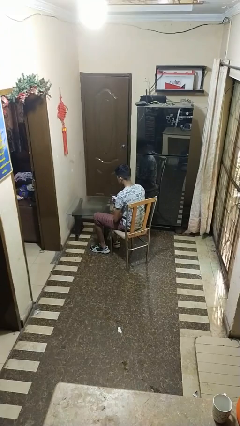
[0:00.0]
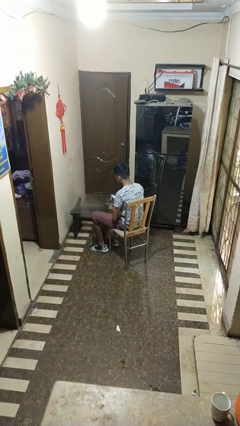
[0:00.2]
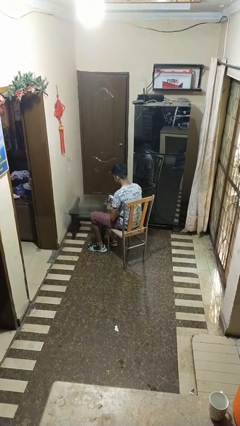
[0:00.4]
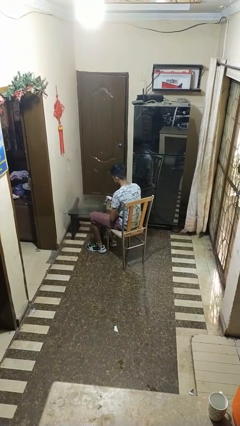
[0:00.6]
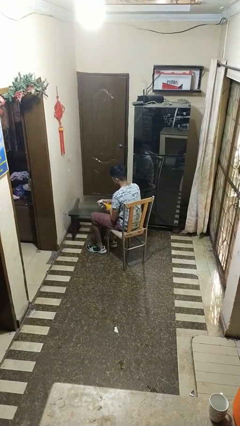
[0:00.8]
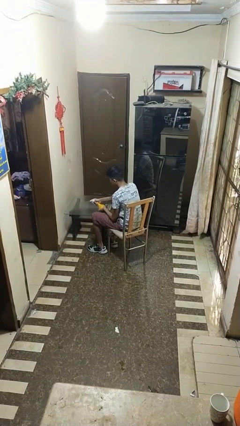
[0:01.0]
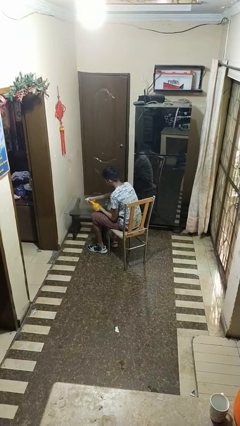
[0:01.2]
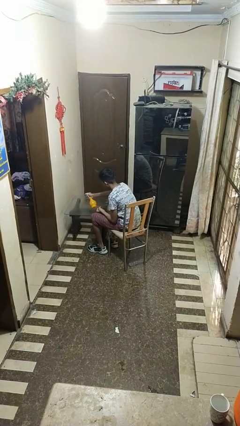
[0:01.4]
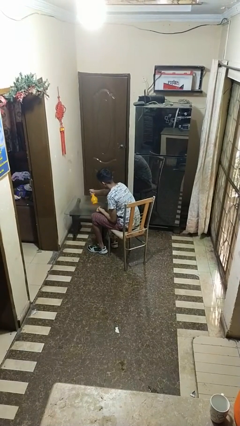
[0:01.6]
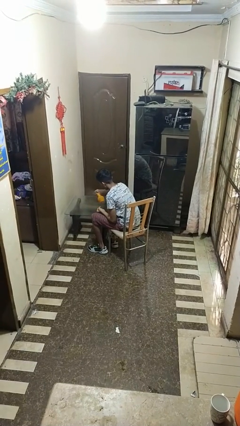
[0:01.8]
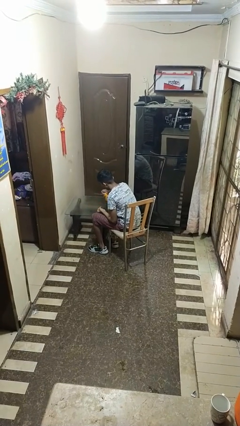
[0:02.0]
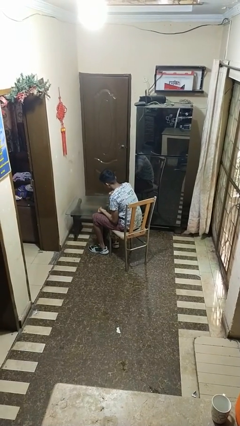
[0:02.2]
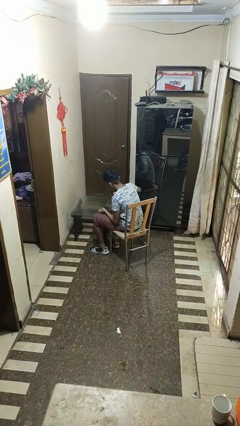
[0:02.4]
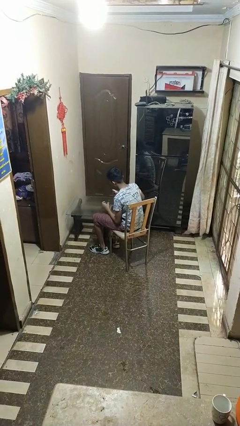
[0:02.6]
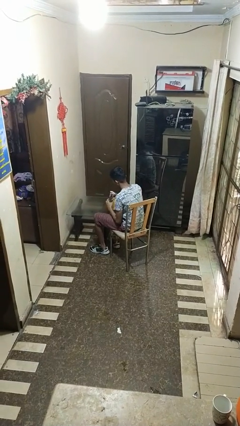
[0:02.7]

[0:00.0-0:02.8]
person sprays from bottle

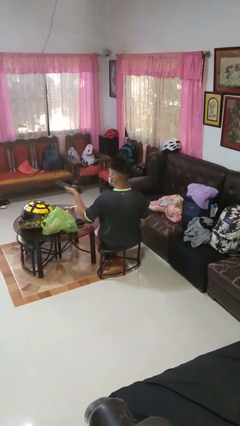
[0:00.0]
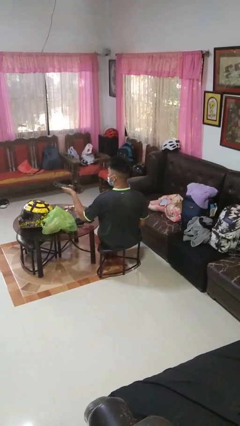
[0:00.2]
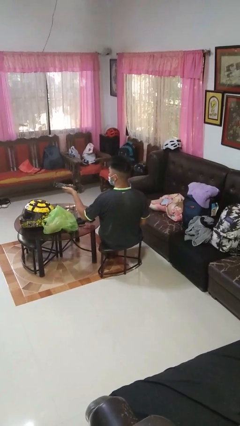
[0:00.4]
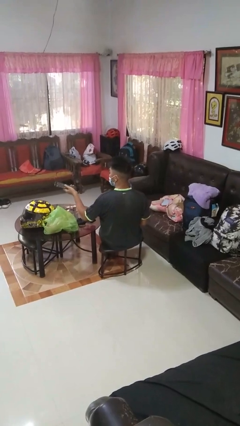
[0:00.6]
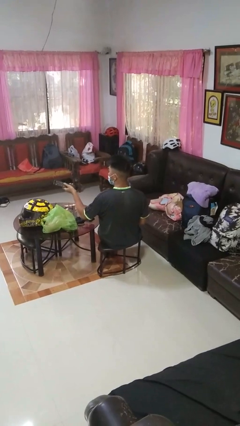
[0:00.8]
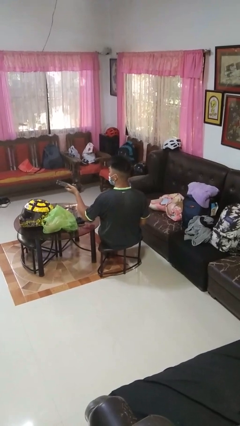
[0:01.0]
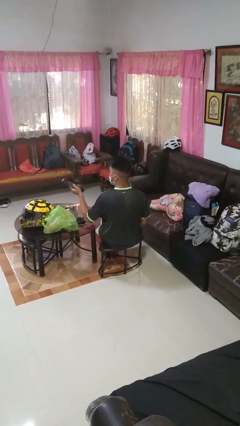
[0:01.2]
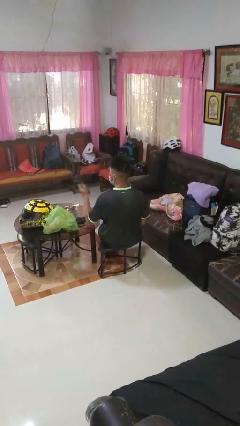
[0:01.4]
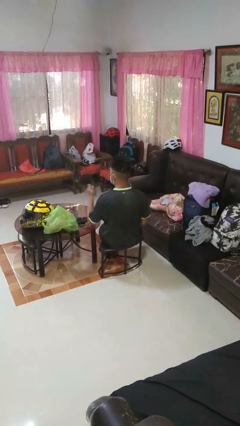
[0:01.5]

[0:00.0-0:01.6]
person uses television remote

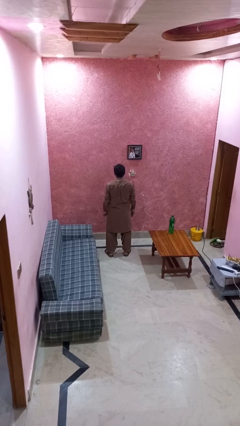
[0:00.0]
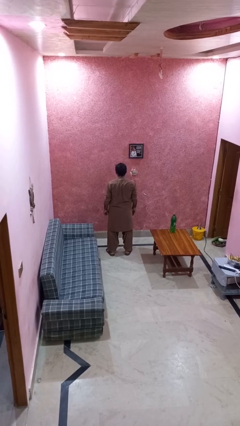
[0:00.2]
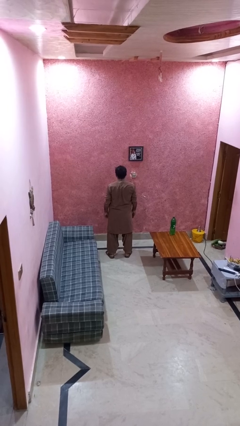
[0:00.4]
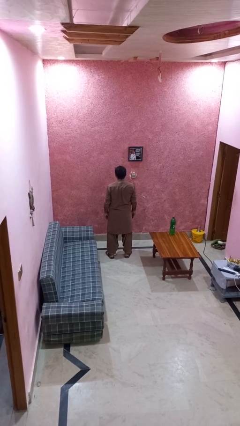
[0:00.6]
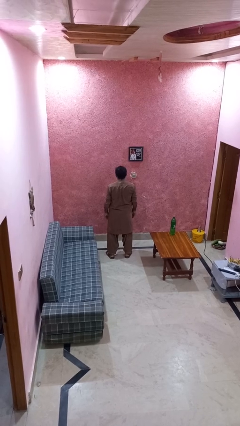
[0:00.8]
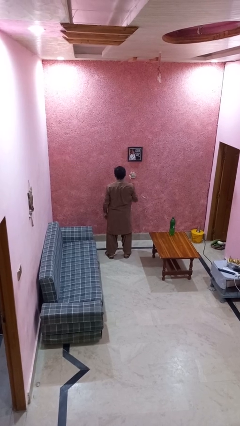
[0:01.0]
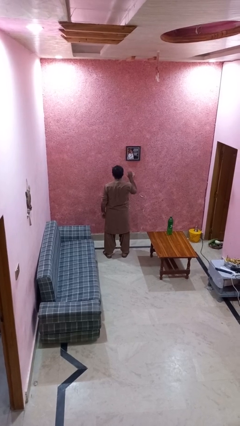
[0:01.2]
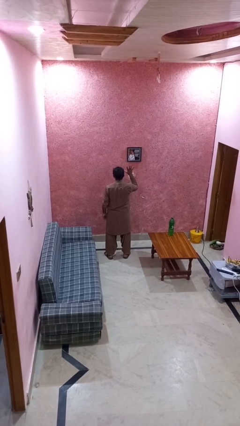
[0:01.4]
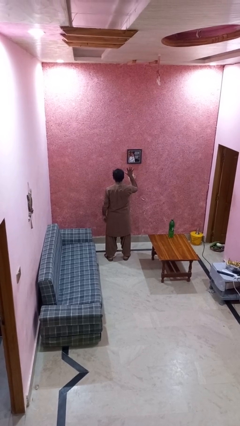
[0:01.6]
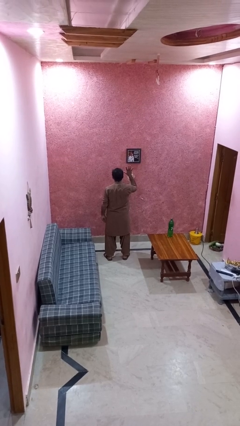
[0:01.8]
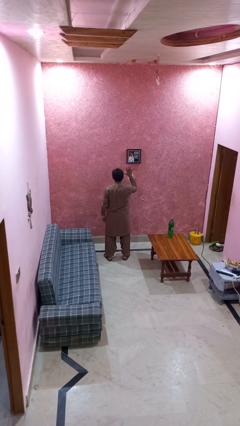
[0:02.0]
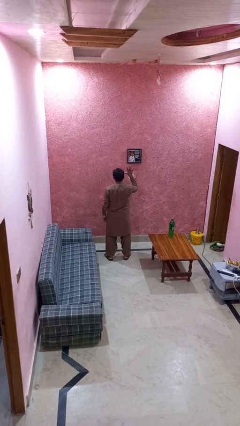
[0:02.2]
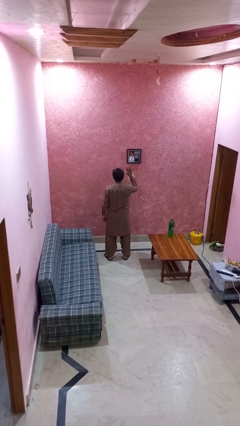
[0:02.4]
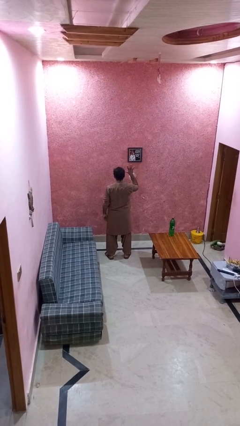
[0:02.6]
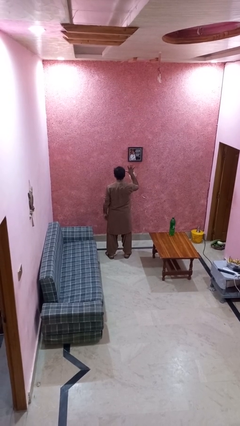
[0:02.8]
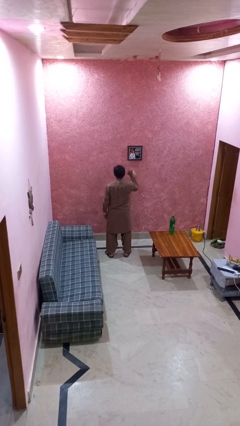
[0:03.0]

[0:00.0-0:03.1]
person gestures number five

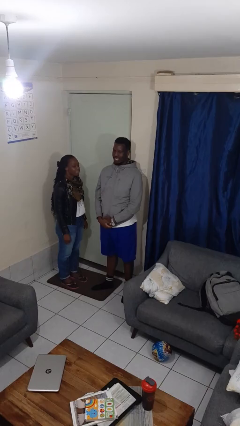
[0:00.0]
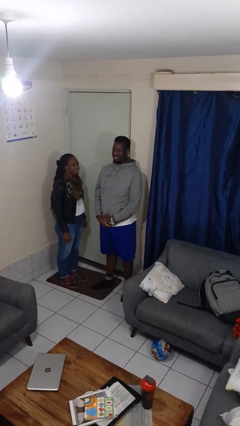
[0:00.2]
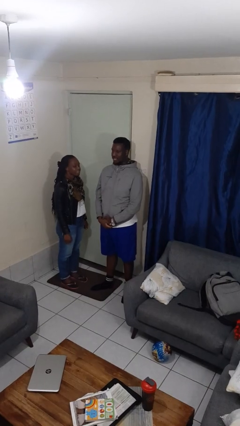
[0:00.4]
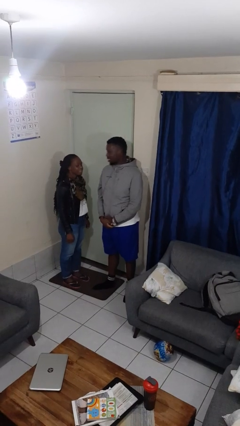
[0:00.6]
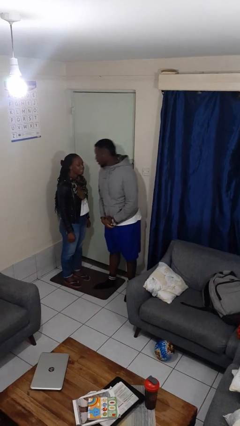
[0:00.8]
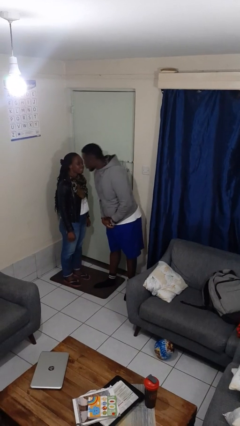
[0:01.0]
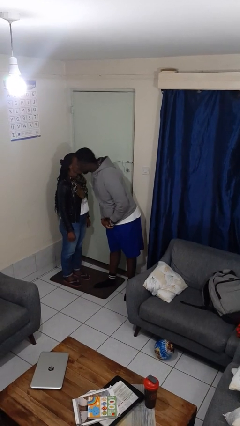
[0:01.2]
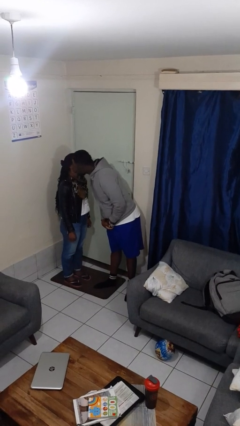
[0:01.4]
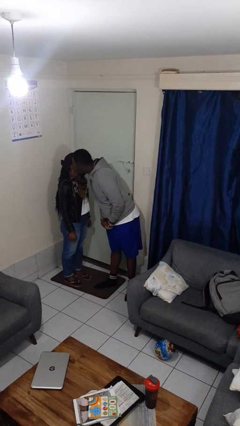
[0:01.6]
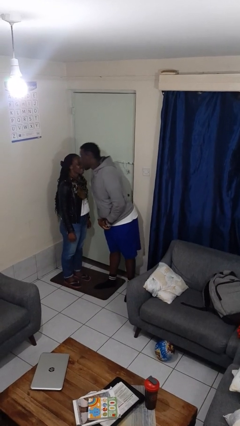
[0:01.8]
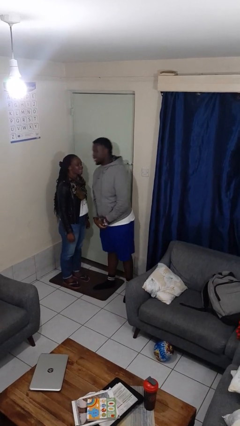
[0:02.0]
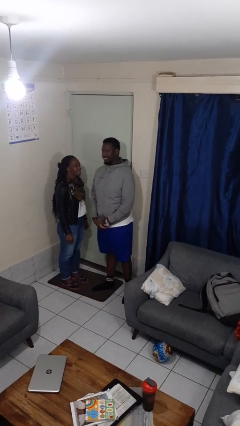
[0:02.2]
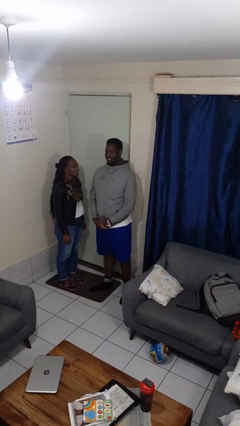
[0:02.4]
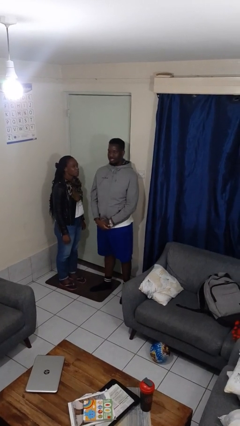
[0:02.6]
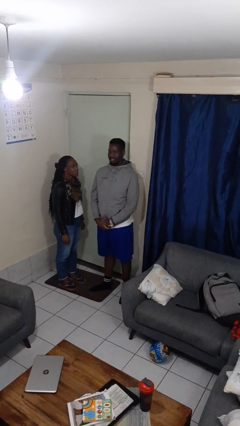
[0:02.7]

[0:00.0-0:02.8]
person kisses cheek of person

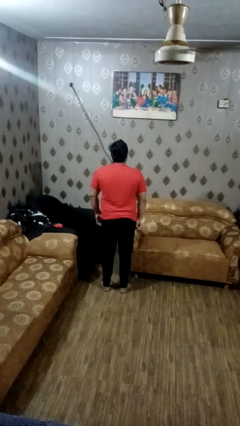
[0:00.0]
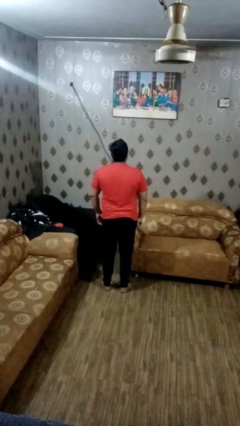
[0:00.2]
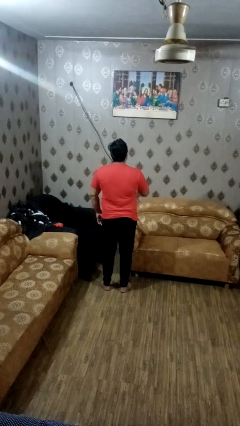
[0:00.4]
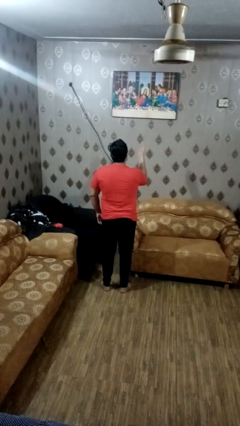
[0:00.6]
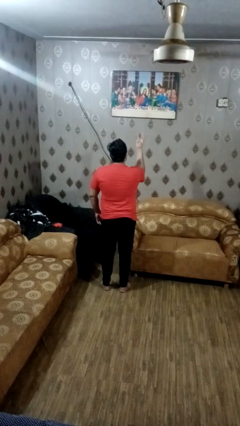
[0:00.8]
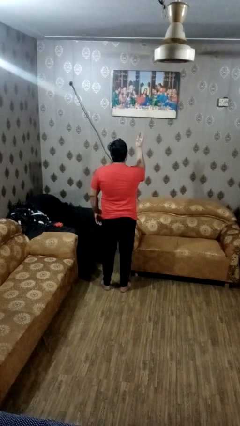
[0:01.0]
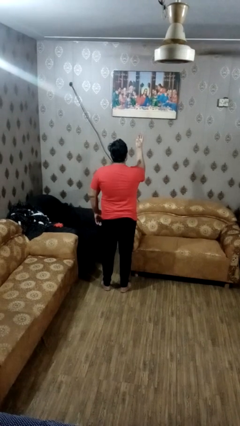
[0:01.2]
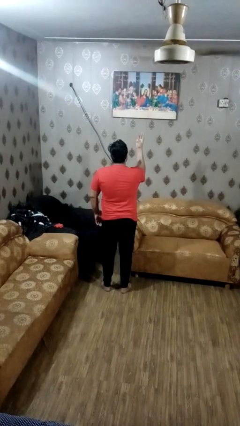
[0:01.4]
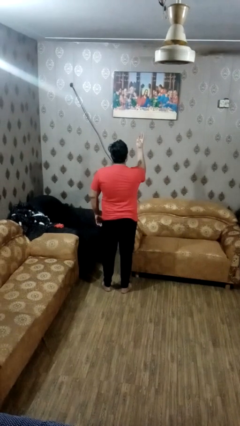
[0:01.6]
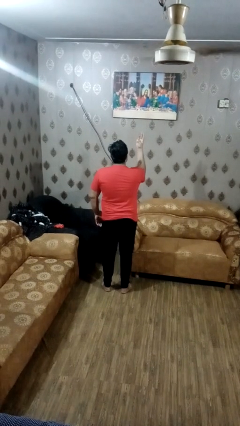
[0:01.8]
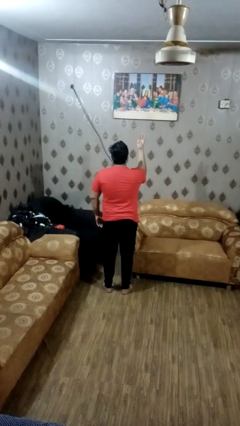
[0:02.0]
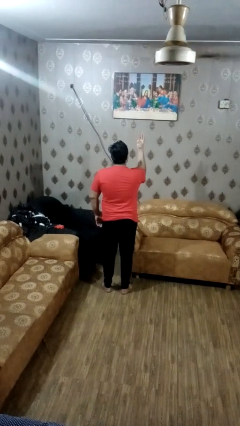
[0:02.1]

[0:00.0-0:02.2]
person gestures number three

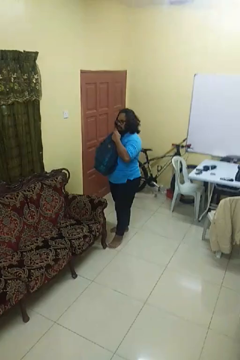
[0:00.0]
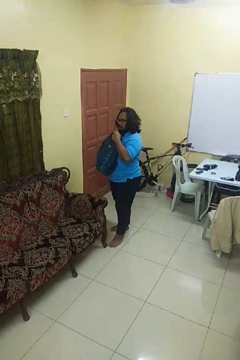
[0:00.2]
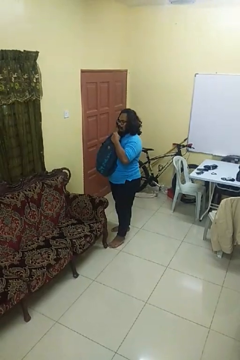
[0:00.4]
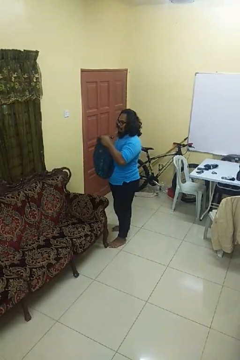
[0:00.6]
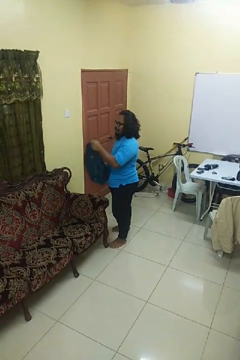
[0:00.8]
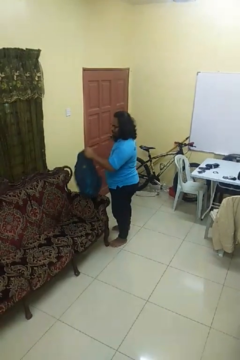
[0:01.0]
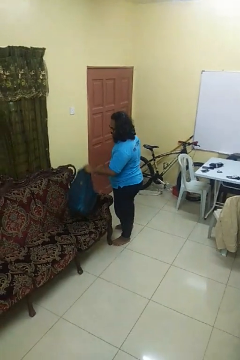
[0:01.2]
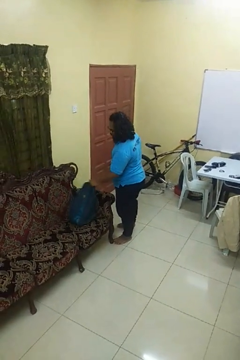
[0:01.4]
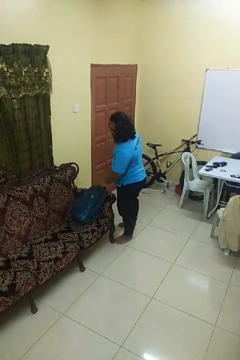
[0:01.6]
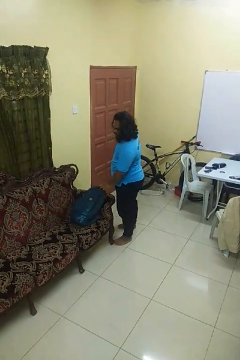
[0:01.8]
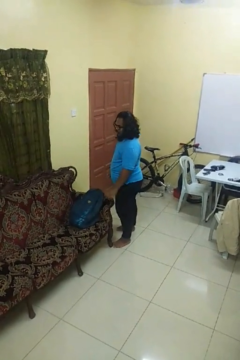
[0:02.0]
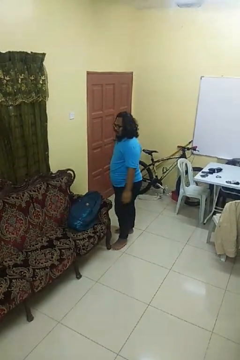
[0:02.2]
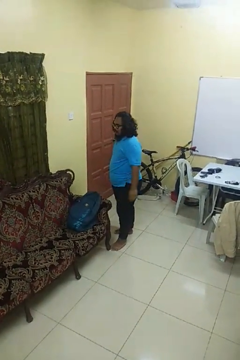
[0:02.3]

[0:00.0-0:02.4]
person puts down object on couch

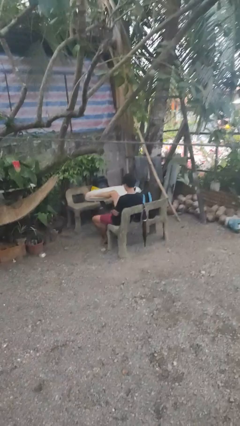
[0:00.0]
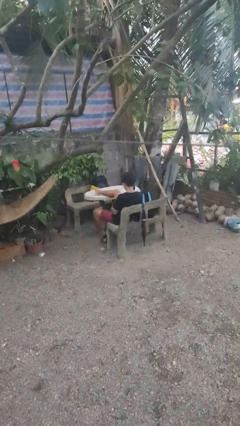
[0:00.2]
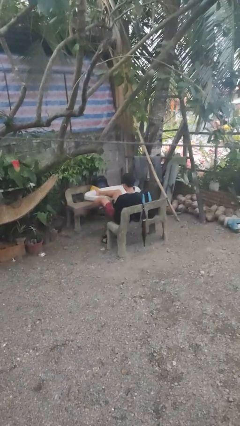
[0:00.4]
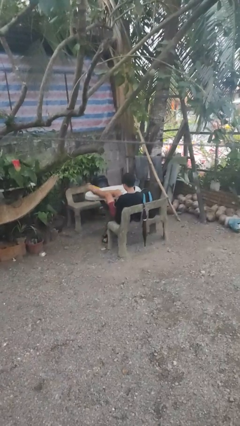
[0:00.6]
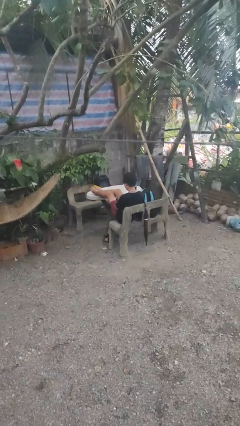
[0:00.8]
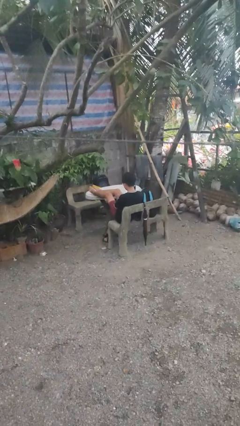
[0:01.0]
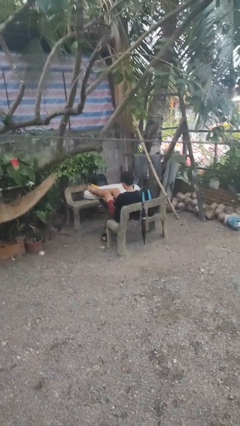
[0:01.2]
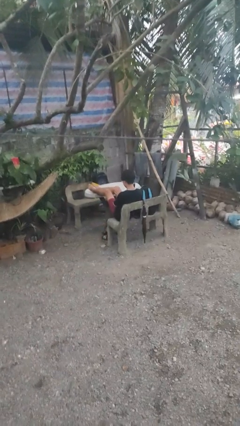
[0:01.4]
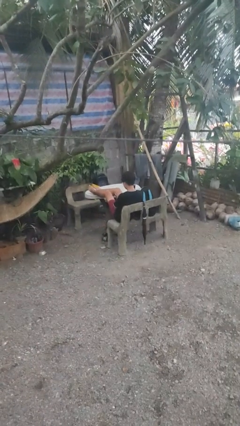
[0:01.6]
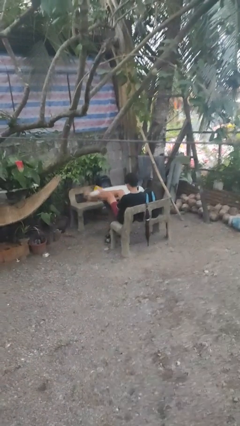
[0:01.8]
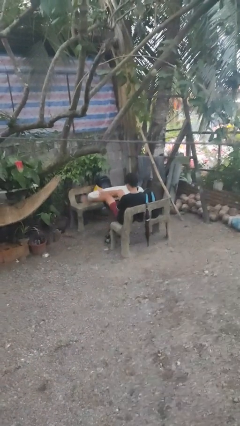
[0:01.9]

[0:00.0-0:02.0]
person puts feet up

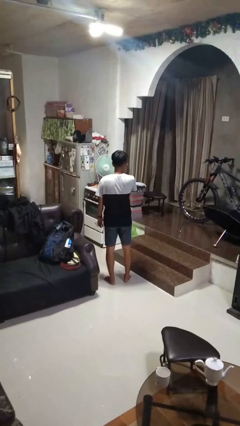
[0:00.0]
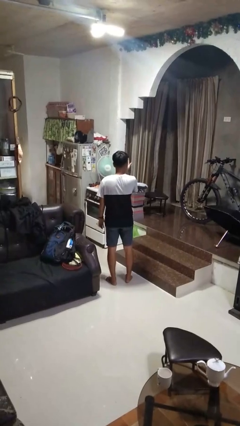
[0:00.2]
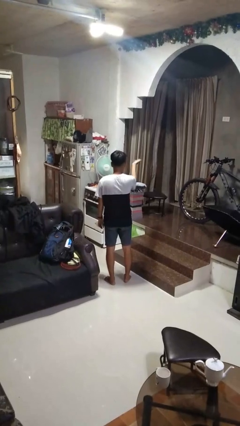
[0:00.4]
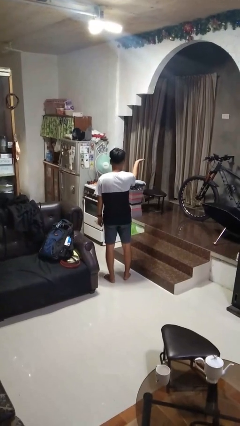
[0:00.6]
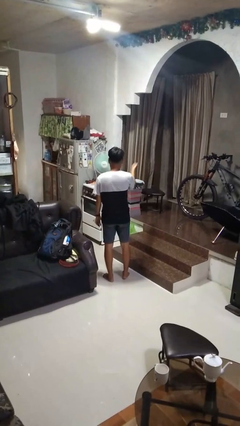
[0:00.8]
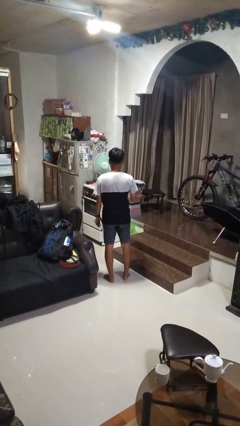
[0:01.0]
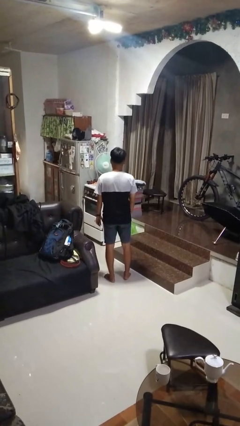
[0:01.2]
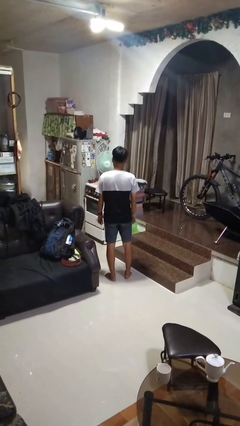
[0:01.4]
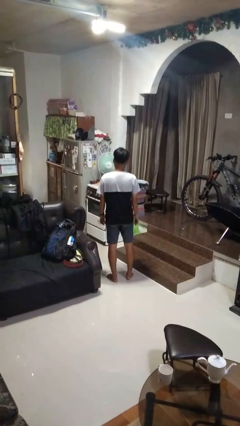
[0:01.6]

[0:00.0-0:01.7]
person gestures blow kiss
